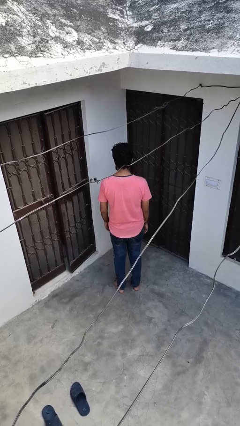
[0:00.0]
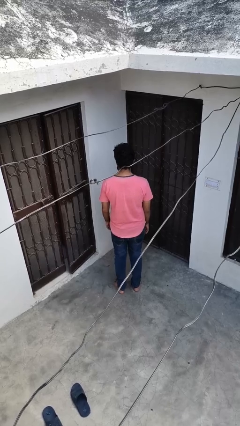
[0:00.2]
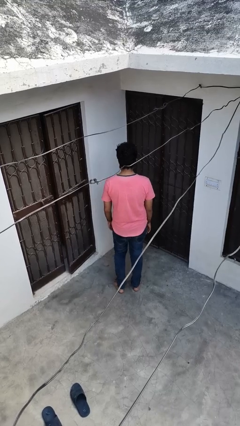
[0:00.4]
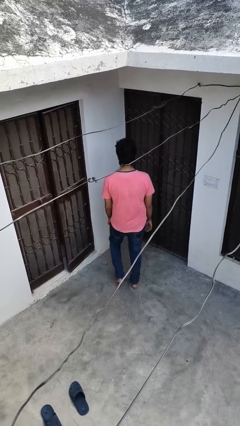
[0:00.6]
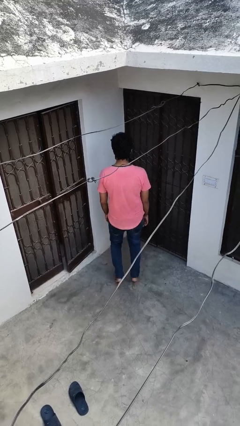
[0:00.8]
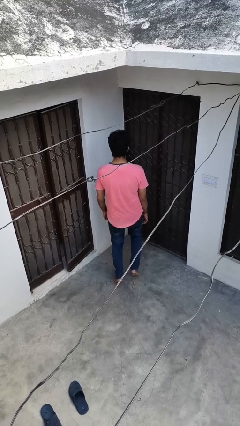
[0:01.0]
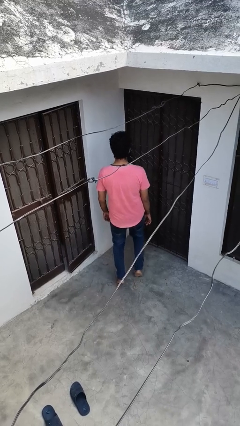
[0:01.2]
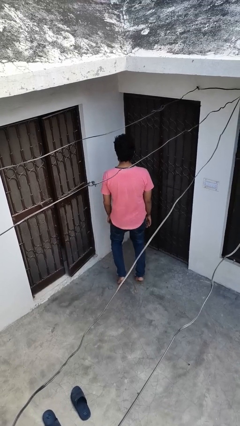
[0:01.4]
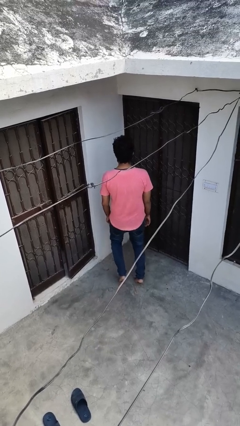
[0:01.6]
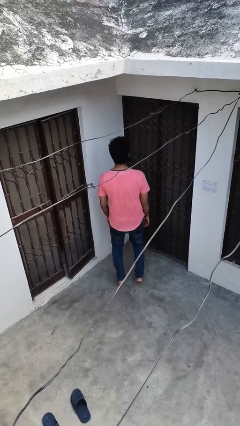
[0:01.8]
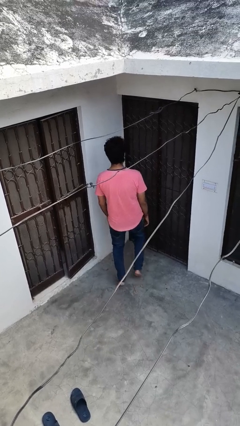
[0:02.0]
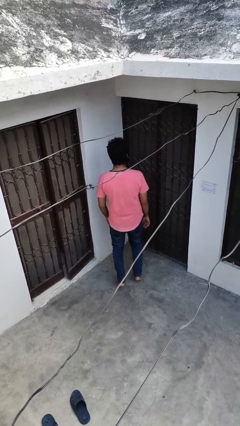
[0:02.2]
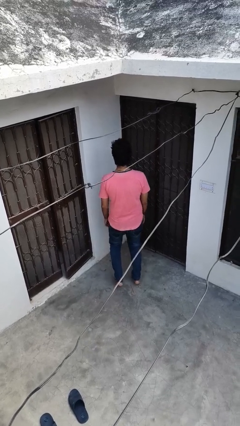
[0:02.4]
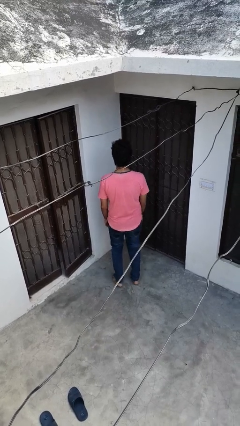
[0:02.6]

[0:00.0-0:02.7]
person walks tiptoe

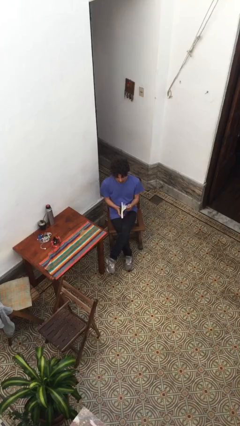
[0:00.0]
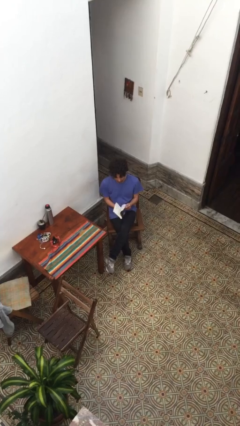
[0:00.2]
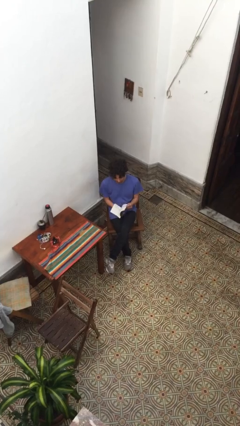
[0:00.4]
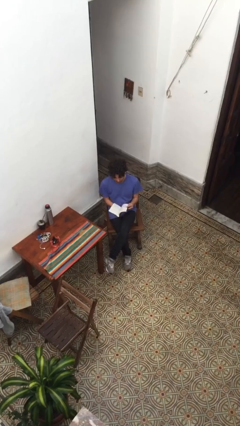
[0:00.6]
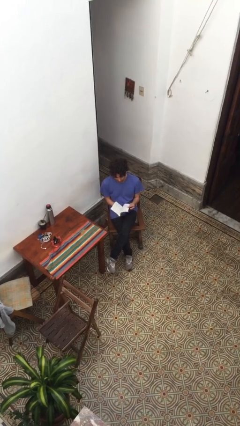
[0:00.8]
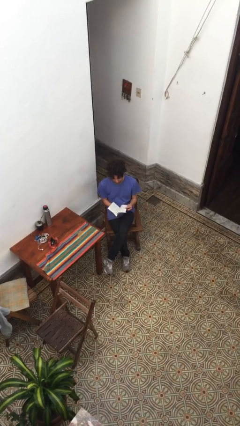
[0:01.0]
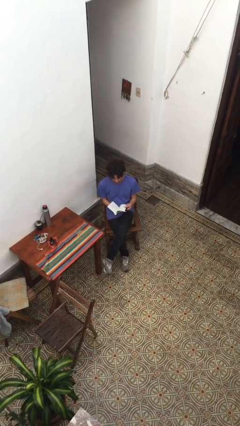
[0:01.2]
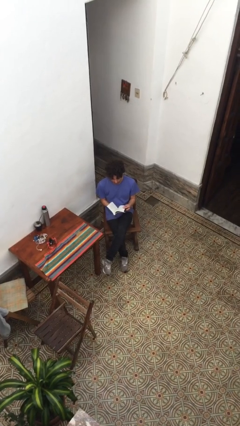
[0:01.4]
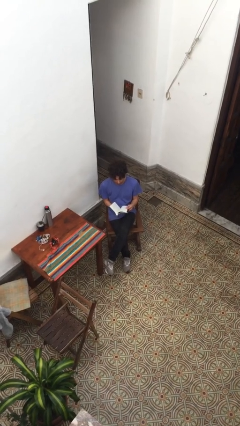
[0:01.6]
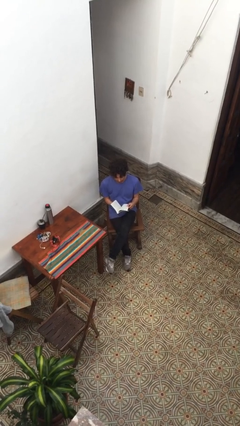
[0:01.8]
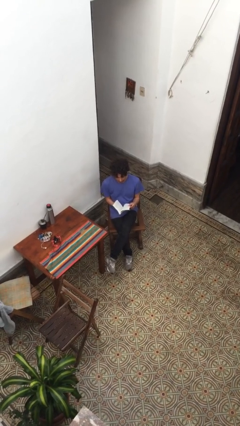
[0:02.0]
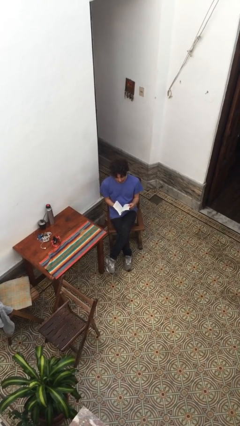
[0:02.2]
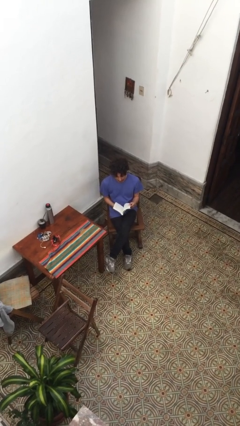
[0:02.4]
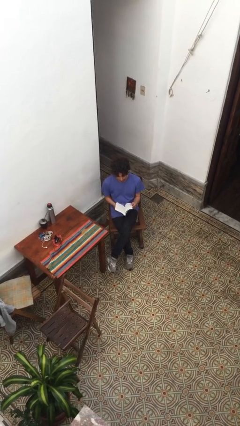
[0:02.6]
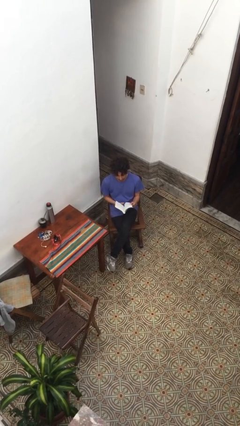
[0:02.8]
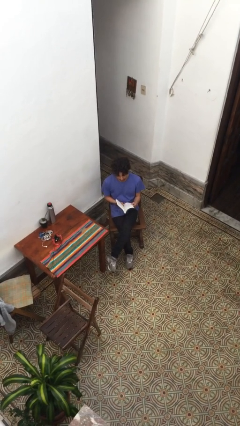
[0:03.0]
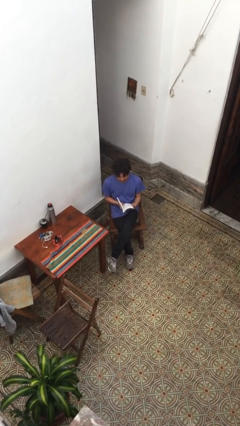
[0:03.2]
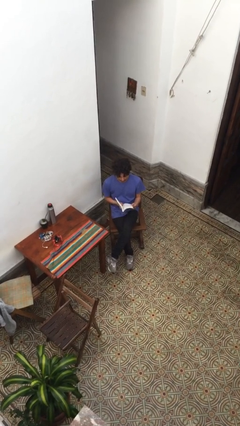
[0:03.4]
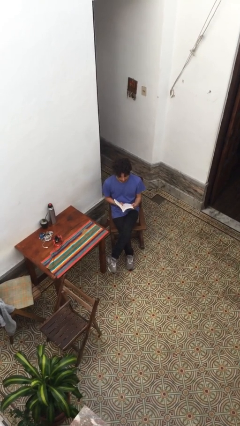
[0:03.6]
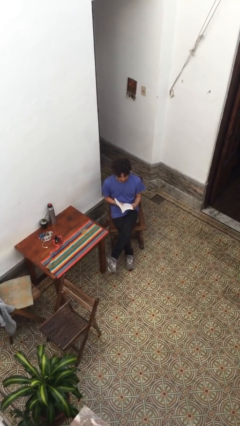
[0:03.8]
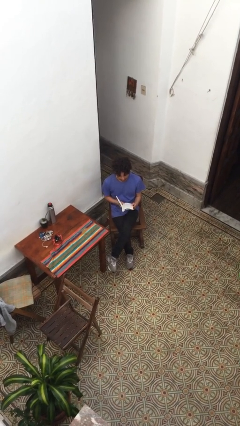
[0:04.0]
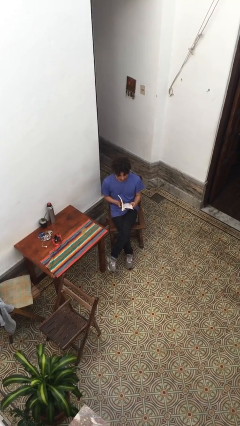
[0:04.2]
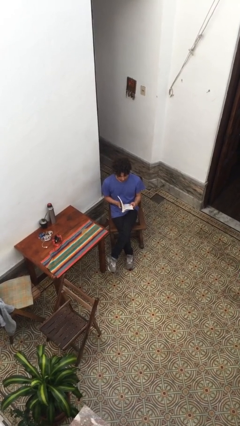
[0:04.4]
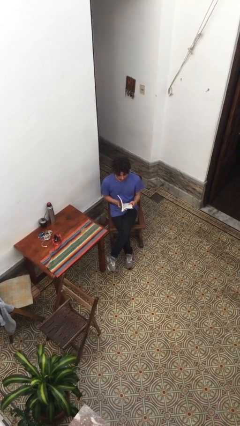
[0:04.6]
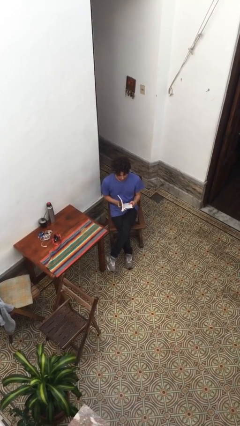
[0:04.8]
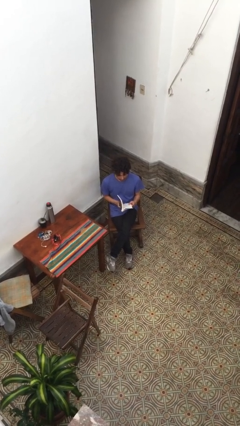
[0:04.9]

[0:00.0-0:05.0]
person reads document

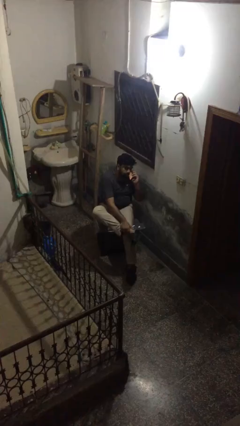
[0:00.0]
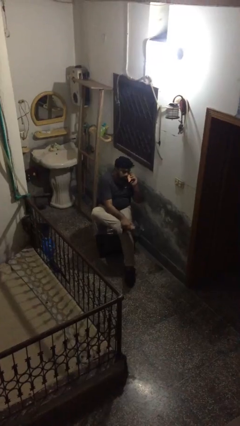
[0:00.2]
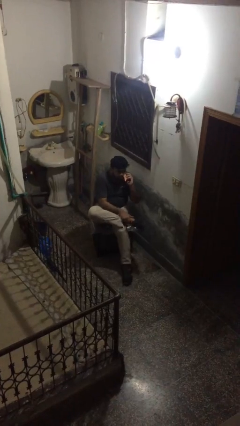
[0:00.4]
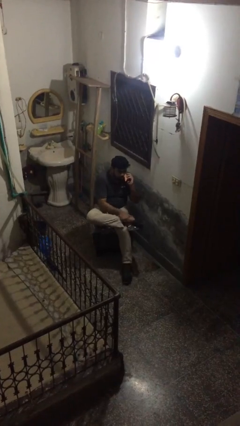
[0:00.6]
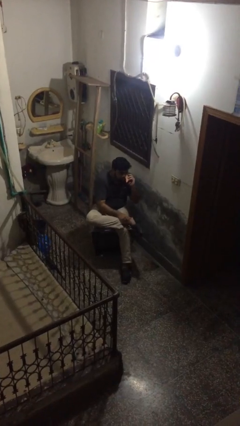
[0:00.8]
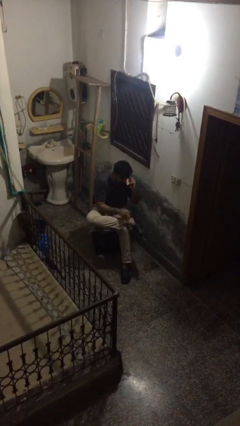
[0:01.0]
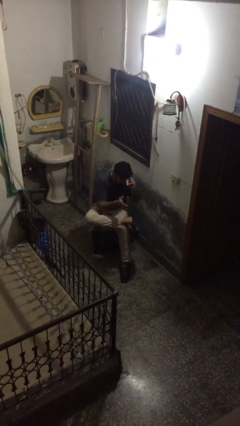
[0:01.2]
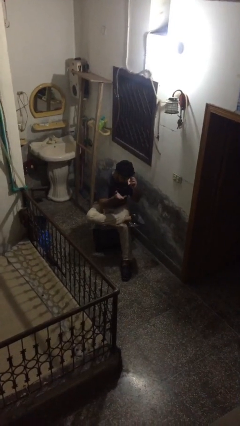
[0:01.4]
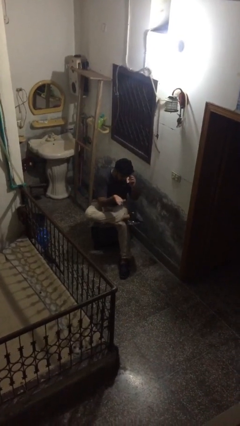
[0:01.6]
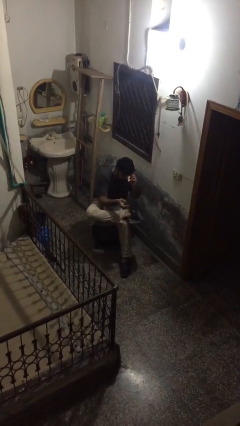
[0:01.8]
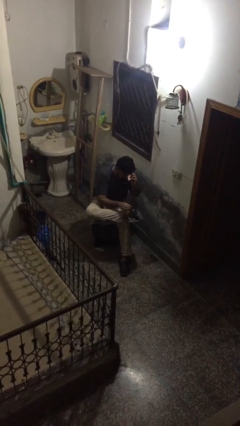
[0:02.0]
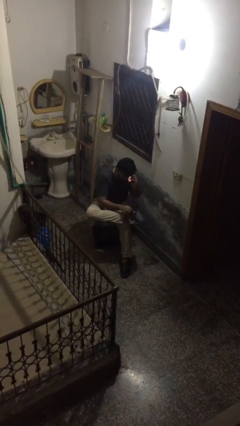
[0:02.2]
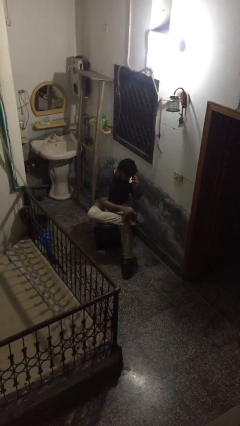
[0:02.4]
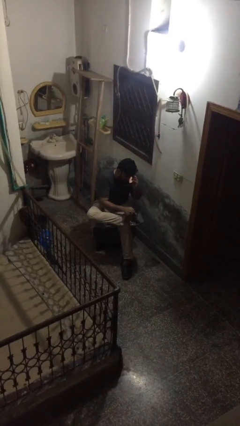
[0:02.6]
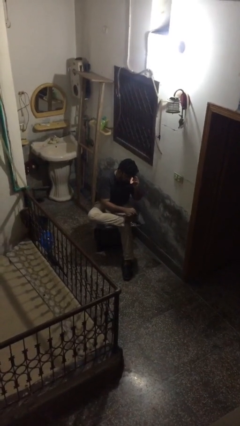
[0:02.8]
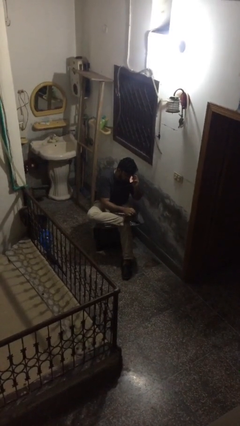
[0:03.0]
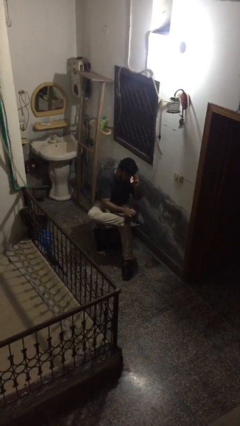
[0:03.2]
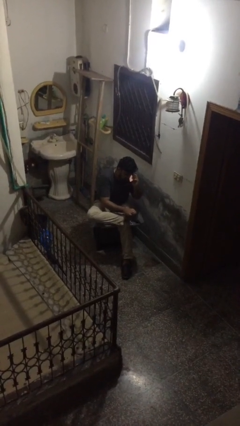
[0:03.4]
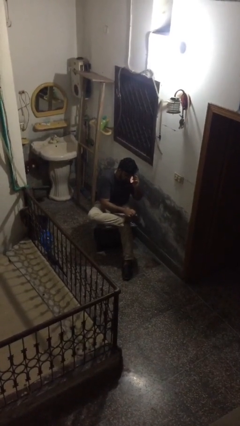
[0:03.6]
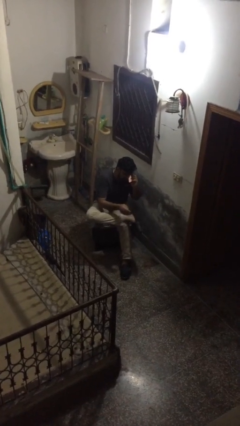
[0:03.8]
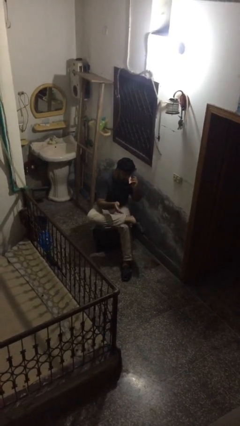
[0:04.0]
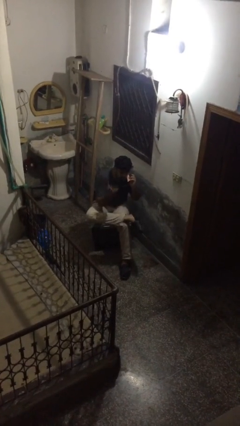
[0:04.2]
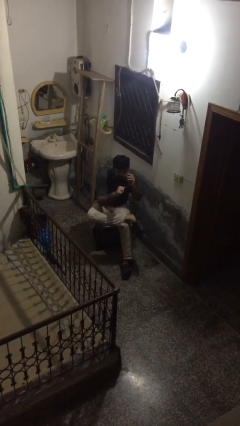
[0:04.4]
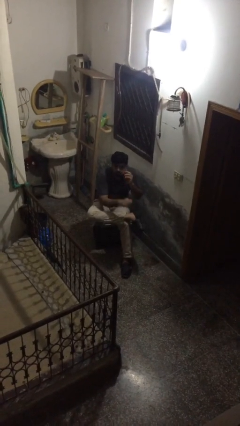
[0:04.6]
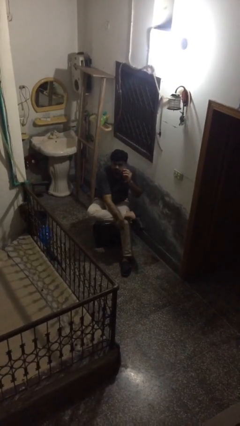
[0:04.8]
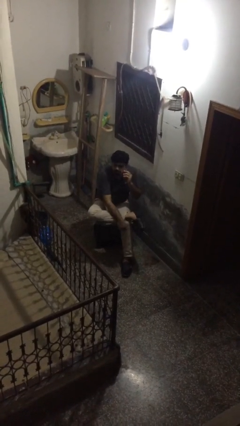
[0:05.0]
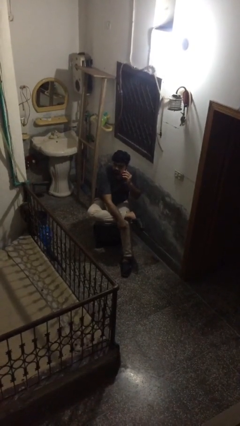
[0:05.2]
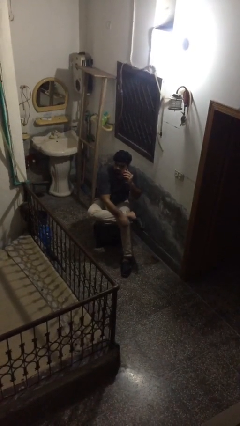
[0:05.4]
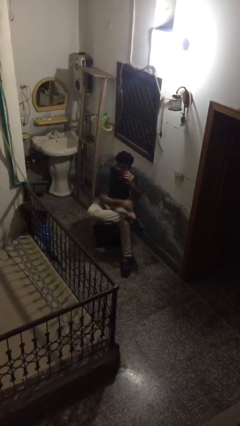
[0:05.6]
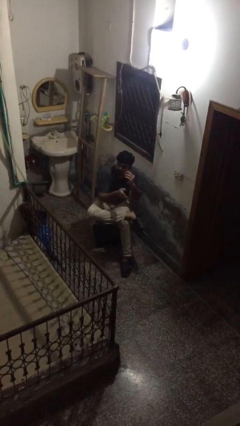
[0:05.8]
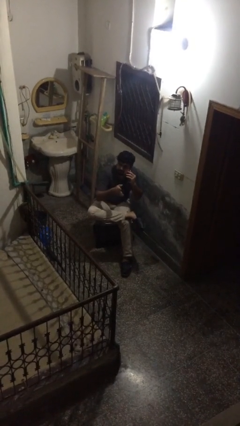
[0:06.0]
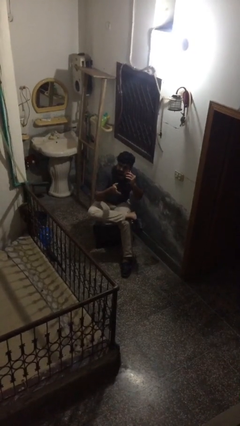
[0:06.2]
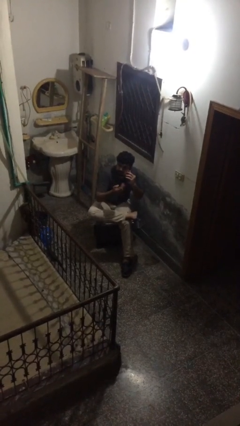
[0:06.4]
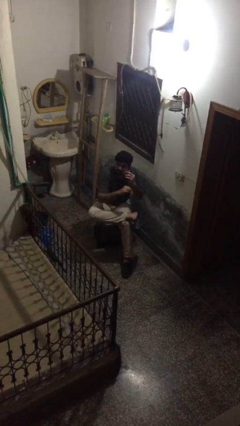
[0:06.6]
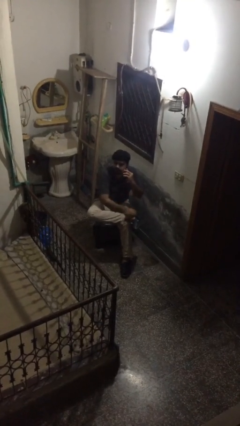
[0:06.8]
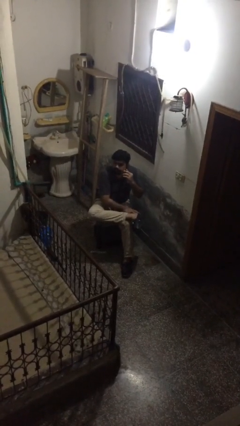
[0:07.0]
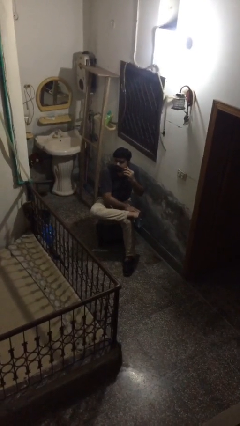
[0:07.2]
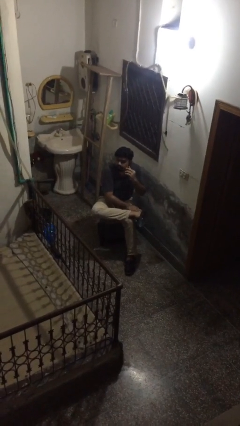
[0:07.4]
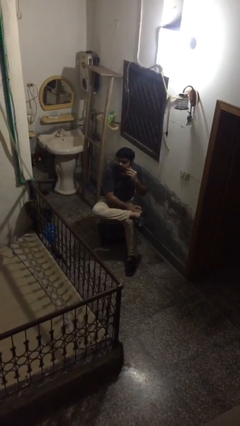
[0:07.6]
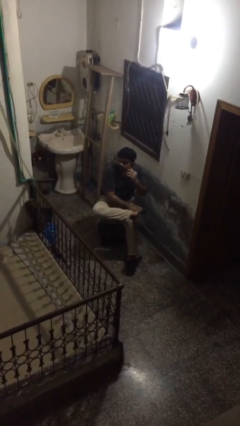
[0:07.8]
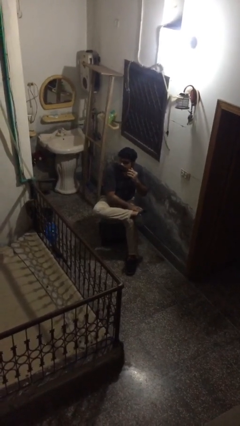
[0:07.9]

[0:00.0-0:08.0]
person talks on phone

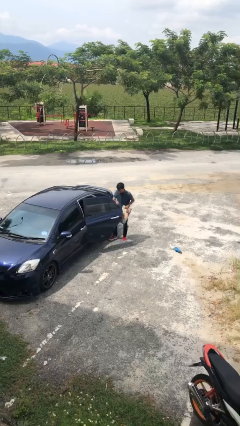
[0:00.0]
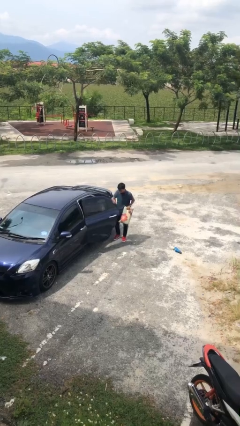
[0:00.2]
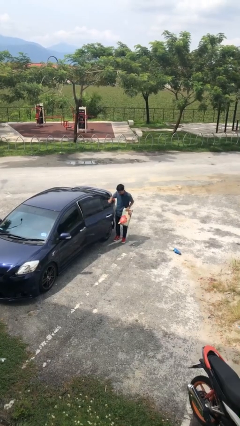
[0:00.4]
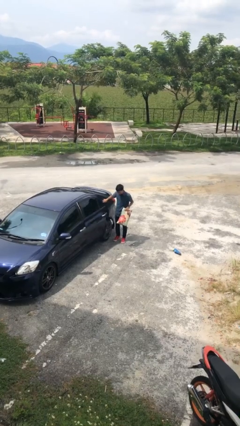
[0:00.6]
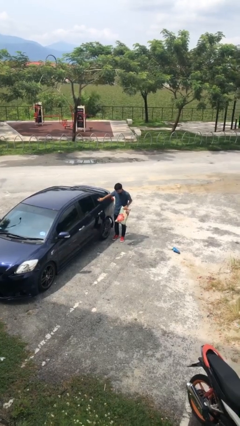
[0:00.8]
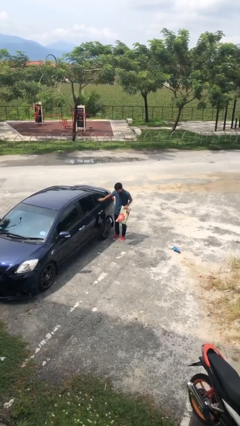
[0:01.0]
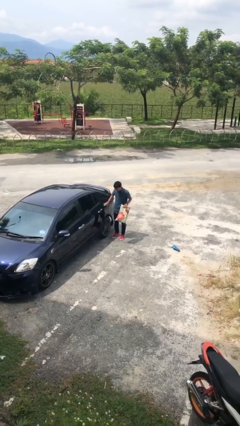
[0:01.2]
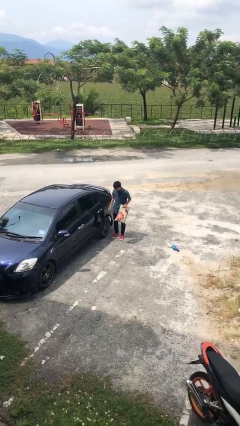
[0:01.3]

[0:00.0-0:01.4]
person closes car door

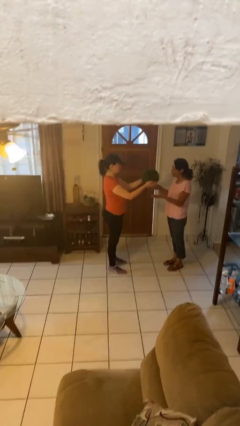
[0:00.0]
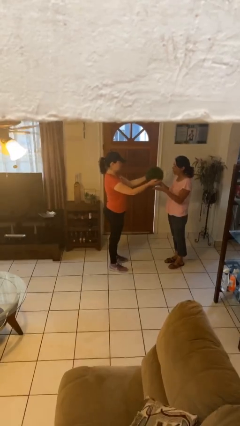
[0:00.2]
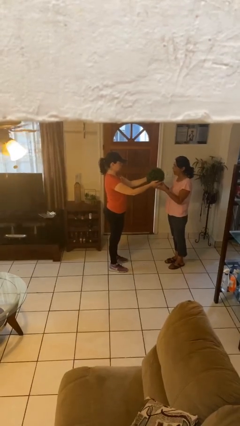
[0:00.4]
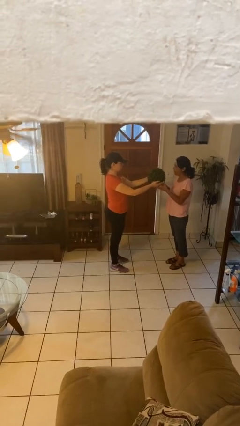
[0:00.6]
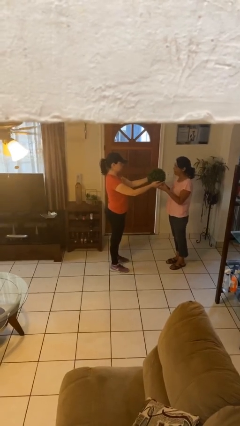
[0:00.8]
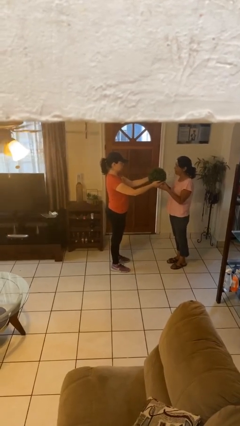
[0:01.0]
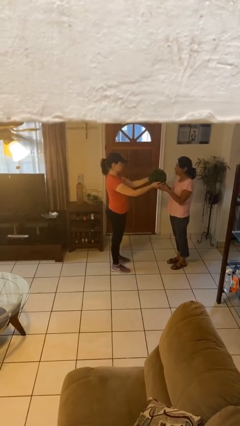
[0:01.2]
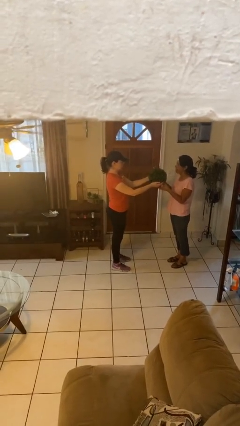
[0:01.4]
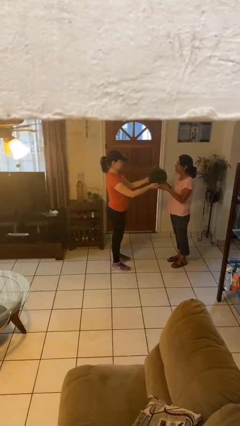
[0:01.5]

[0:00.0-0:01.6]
person transfers object to person
